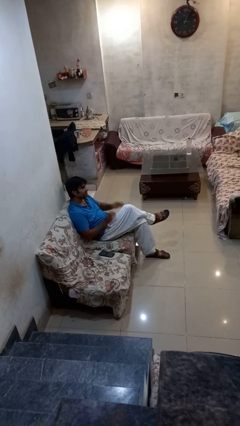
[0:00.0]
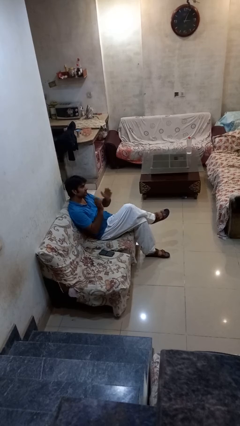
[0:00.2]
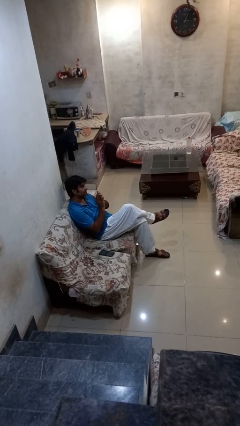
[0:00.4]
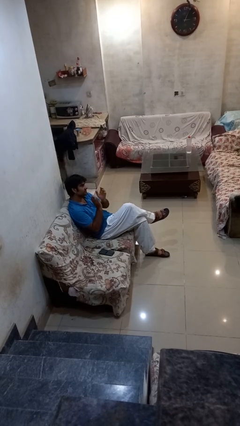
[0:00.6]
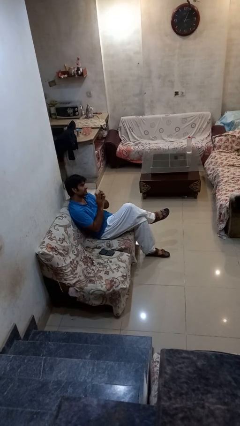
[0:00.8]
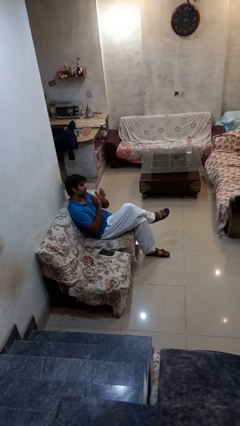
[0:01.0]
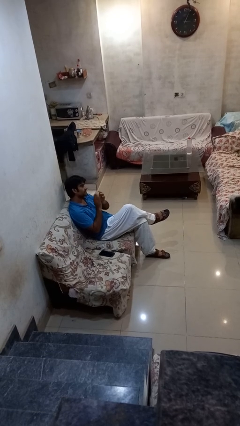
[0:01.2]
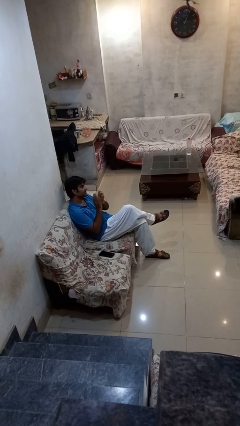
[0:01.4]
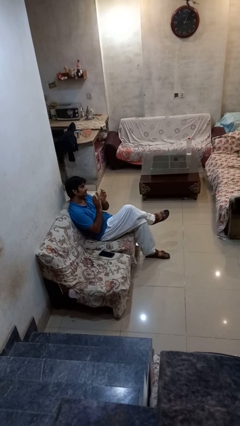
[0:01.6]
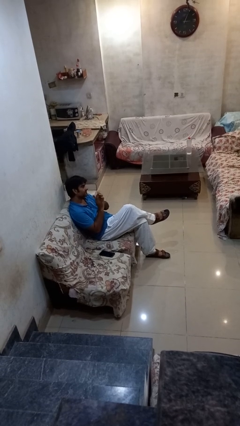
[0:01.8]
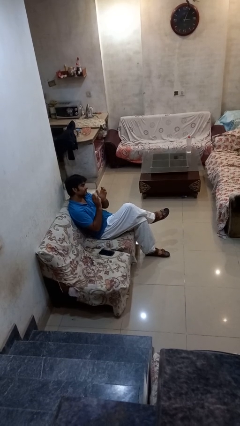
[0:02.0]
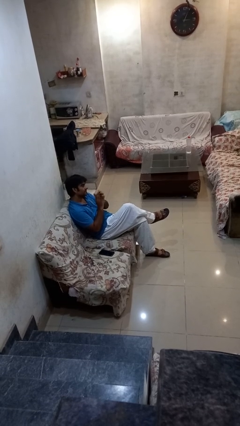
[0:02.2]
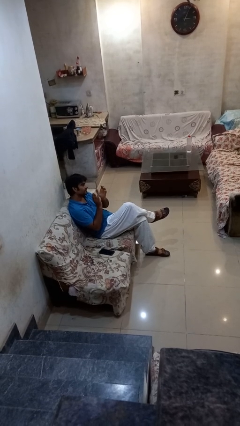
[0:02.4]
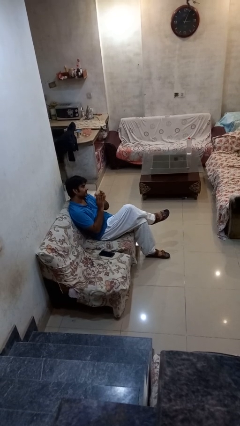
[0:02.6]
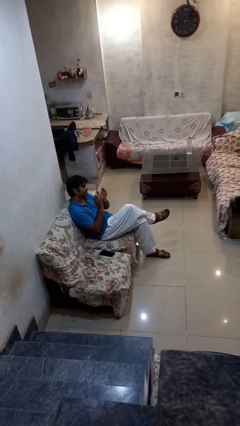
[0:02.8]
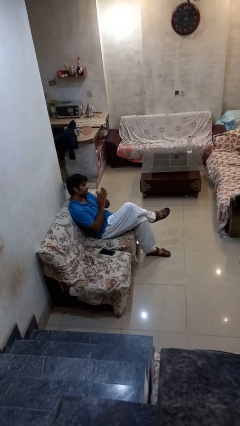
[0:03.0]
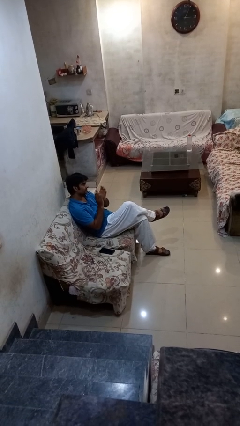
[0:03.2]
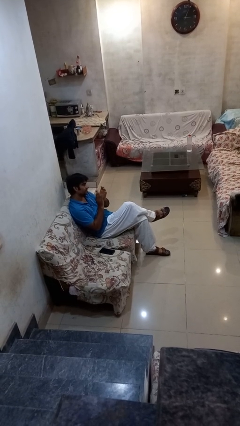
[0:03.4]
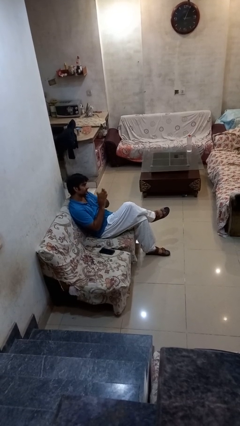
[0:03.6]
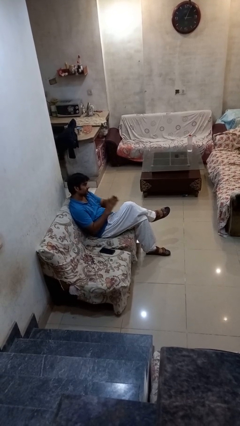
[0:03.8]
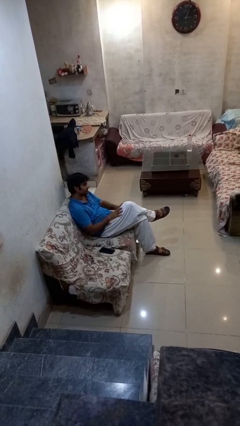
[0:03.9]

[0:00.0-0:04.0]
person claps hands

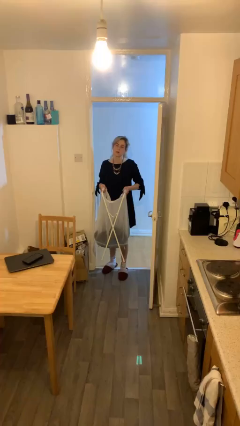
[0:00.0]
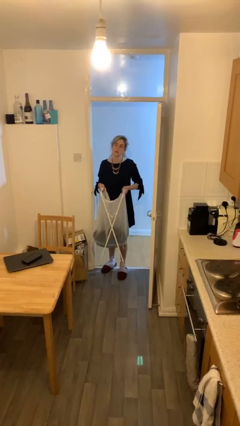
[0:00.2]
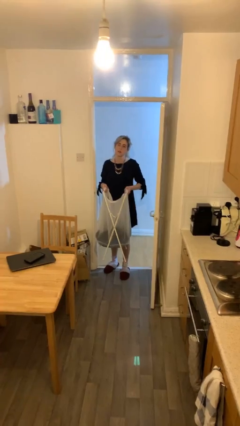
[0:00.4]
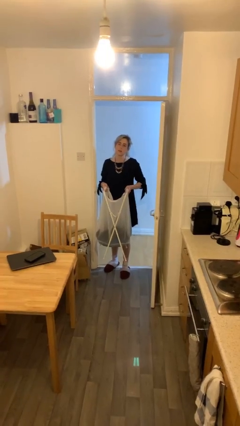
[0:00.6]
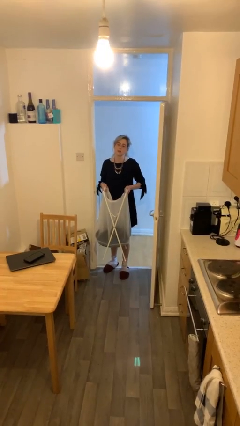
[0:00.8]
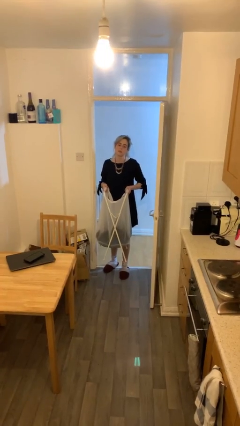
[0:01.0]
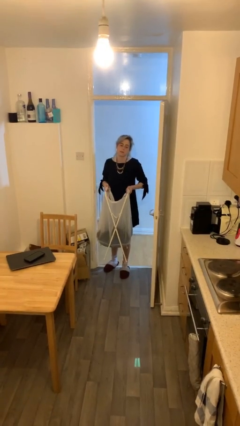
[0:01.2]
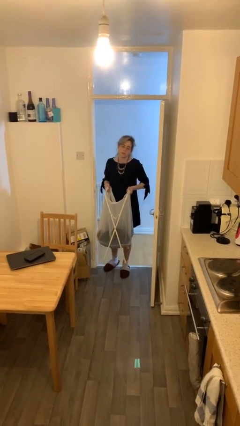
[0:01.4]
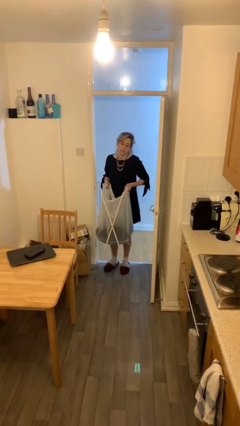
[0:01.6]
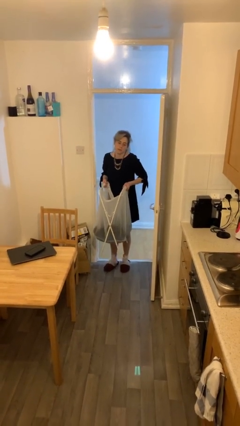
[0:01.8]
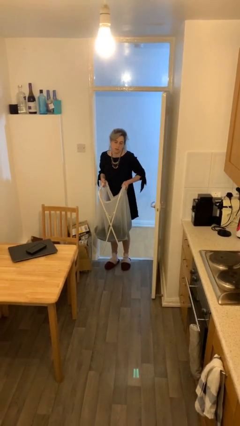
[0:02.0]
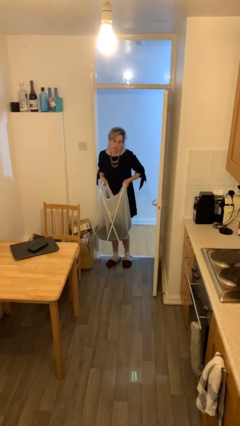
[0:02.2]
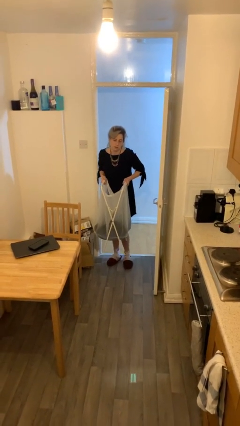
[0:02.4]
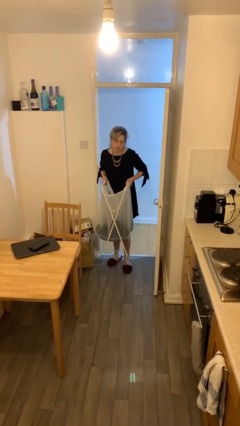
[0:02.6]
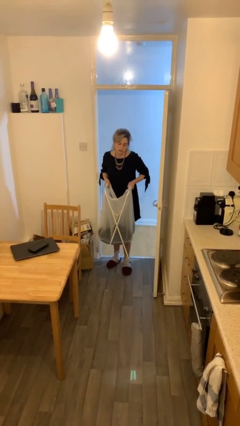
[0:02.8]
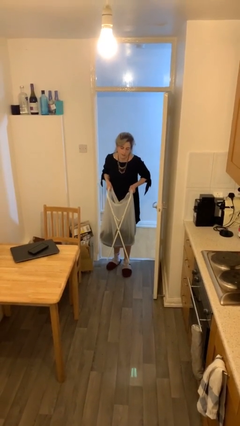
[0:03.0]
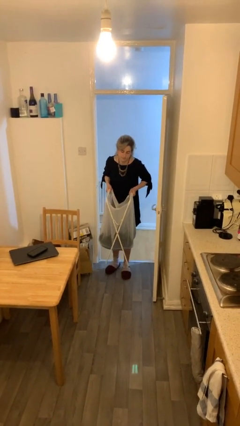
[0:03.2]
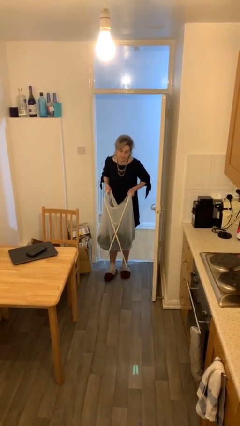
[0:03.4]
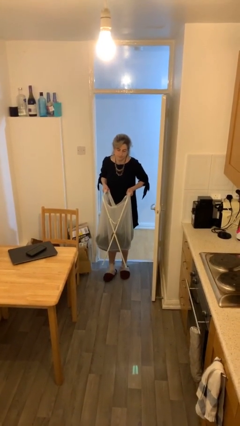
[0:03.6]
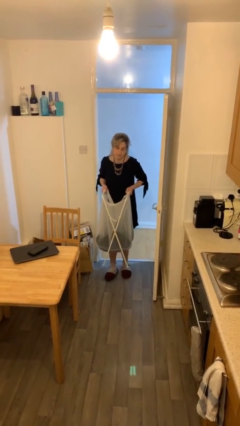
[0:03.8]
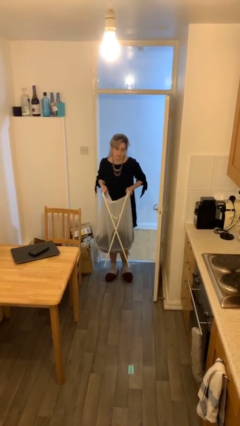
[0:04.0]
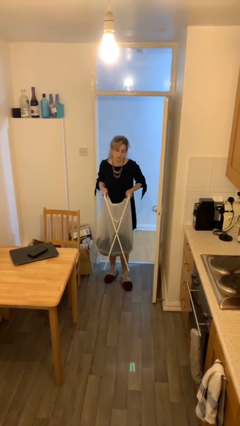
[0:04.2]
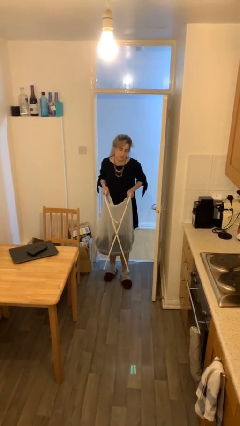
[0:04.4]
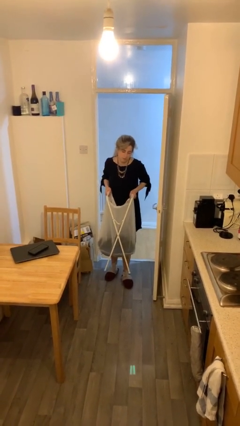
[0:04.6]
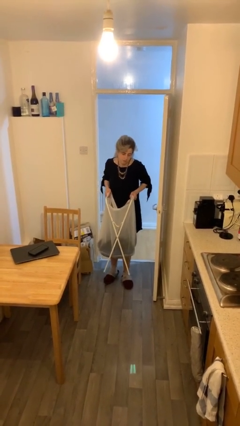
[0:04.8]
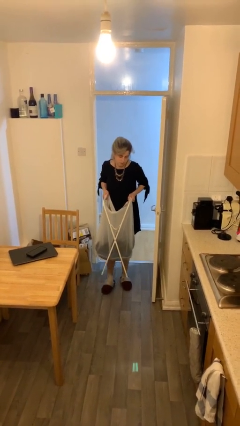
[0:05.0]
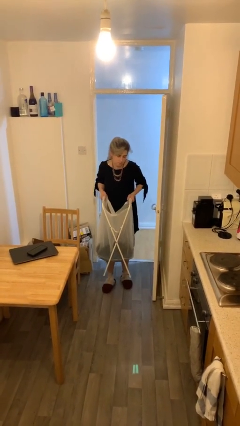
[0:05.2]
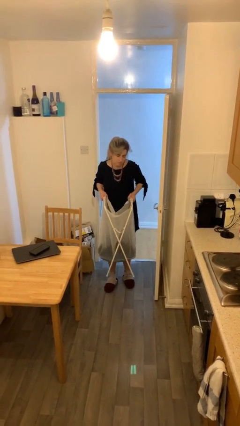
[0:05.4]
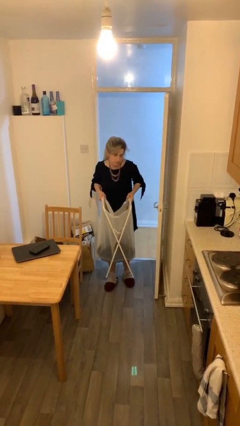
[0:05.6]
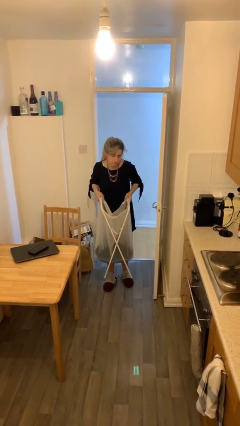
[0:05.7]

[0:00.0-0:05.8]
person carries heavy object

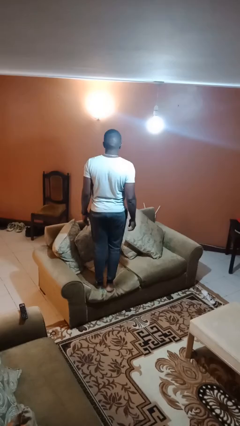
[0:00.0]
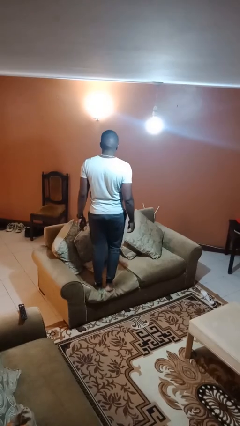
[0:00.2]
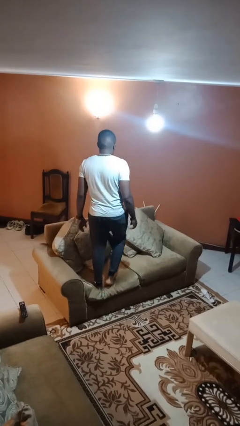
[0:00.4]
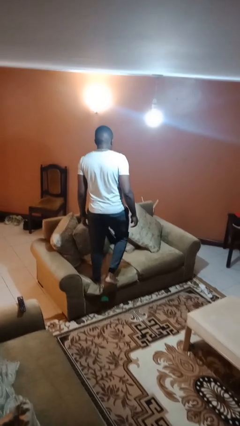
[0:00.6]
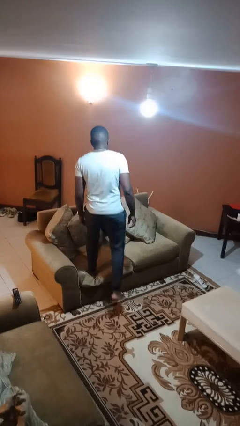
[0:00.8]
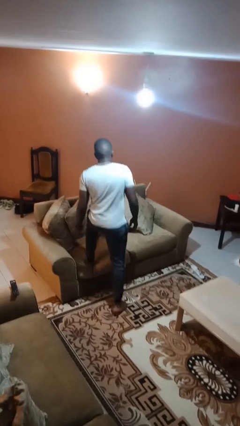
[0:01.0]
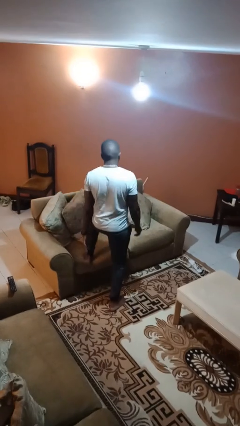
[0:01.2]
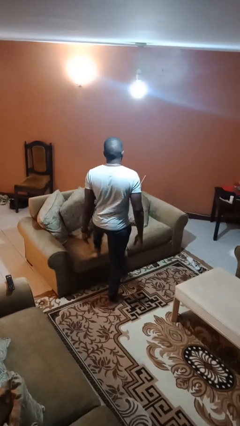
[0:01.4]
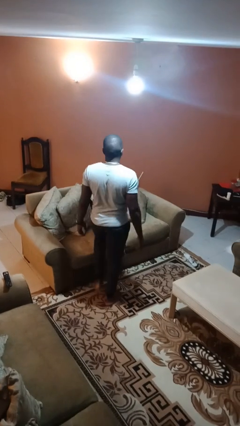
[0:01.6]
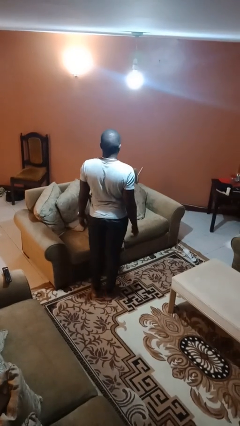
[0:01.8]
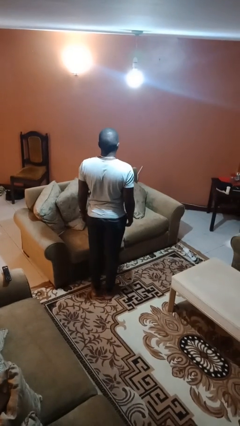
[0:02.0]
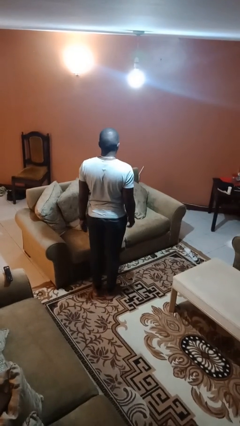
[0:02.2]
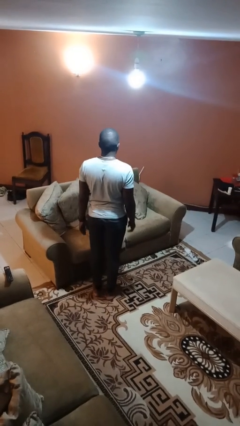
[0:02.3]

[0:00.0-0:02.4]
person climbs off couch

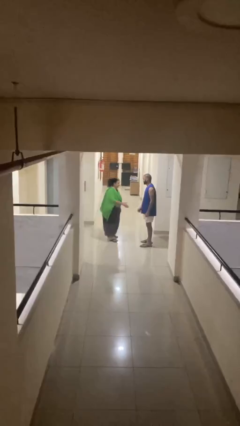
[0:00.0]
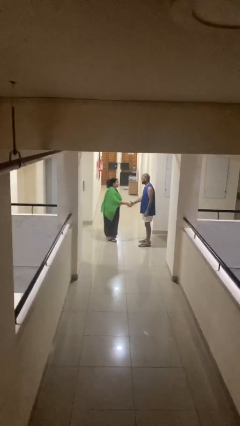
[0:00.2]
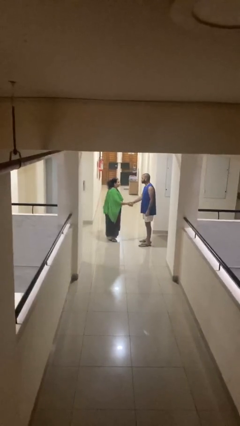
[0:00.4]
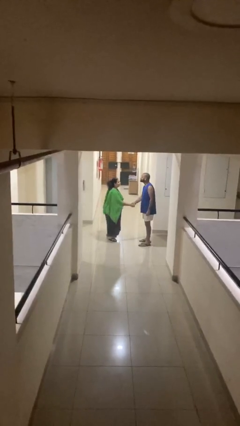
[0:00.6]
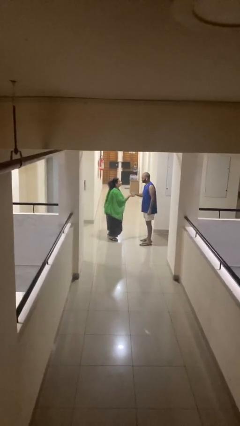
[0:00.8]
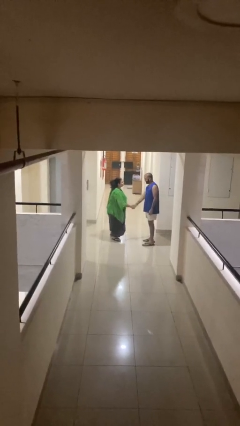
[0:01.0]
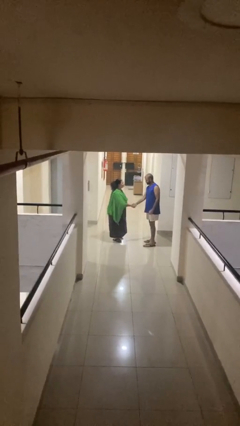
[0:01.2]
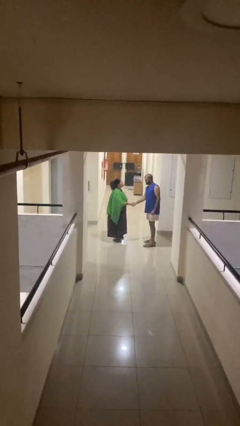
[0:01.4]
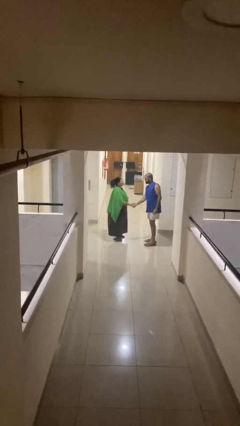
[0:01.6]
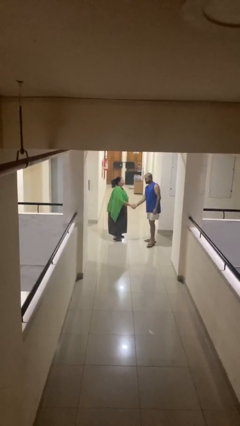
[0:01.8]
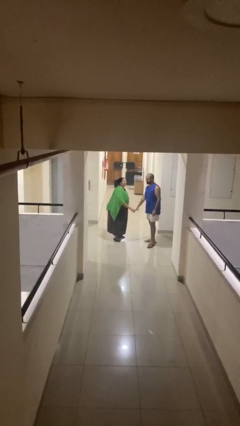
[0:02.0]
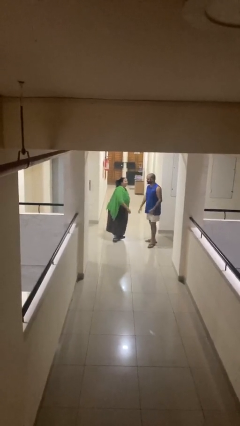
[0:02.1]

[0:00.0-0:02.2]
person shakes hand

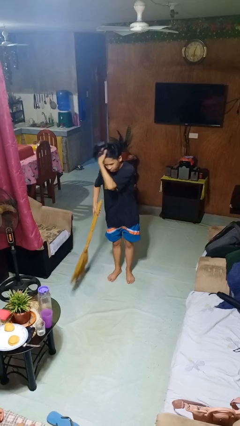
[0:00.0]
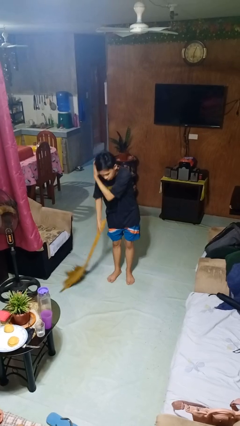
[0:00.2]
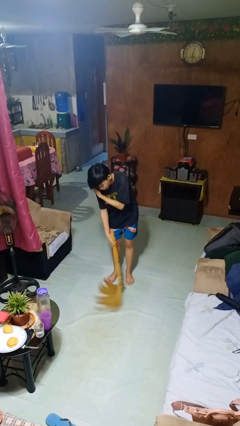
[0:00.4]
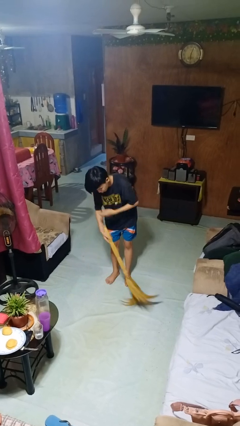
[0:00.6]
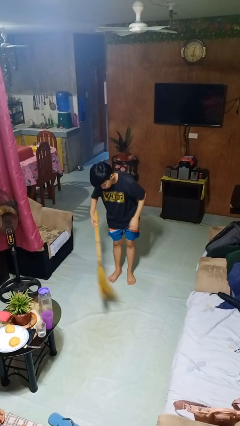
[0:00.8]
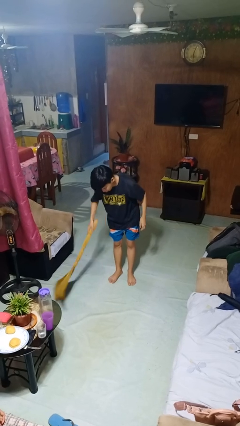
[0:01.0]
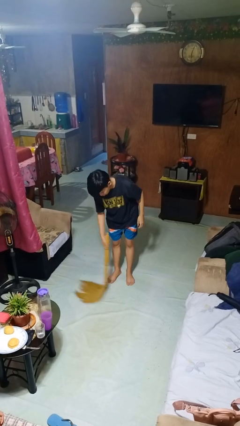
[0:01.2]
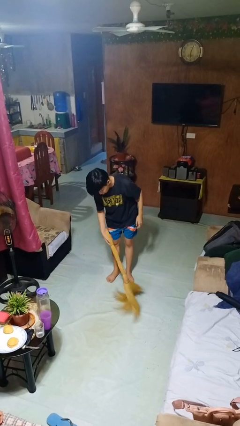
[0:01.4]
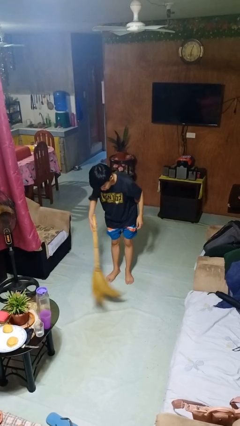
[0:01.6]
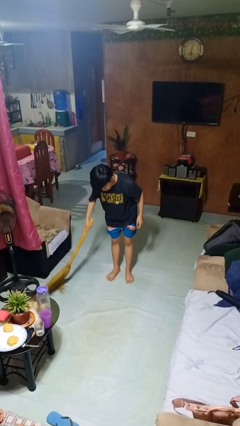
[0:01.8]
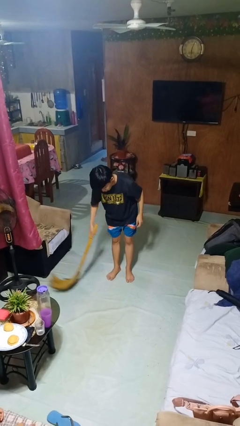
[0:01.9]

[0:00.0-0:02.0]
person sweeps floor

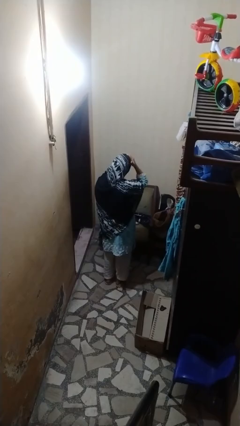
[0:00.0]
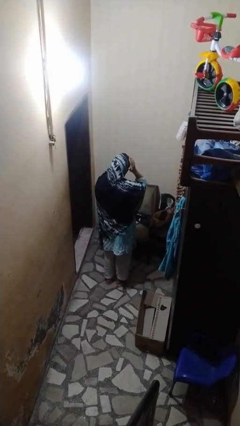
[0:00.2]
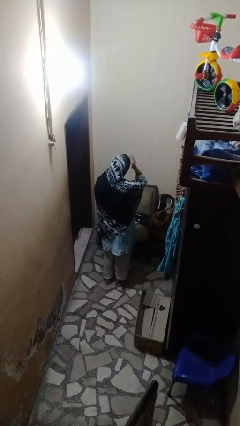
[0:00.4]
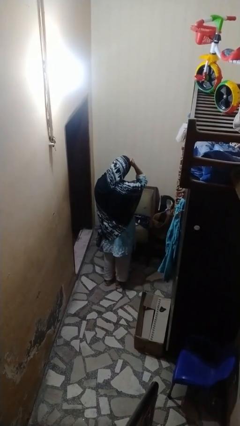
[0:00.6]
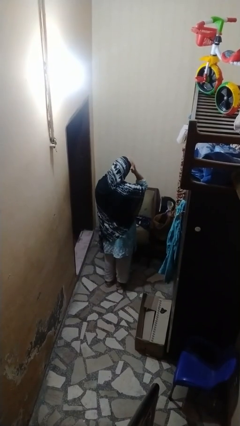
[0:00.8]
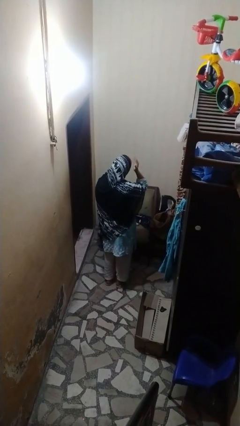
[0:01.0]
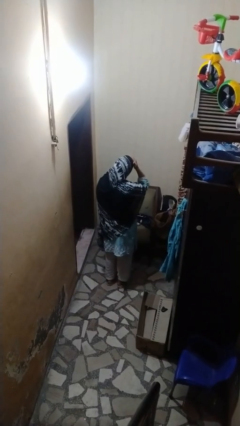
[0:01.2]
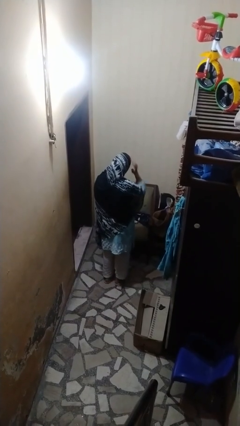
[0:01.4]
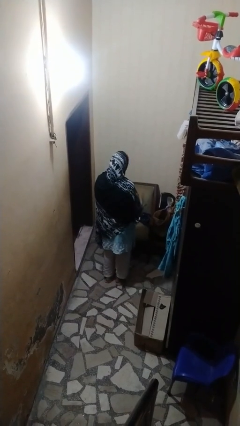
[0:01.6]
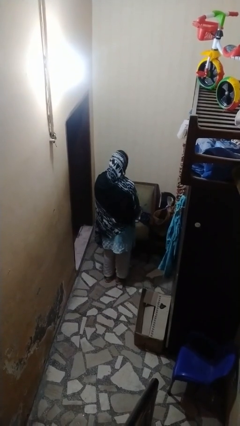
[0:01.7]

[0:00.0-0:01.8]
person pats head
